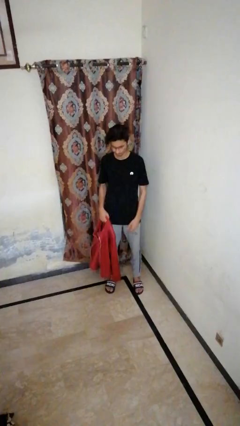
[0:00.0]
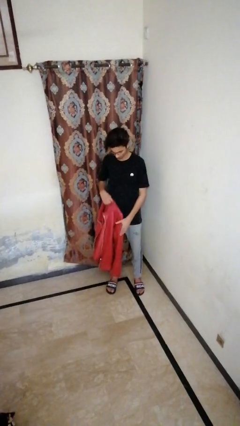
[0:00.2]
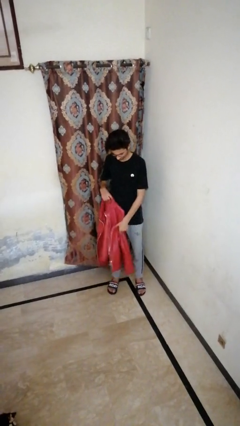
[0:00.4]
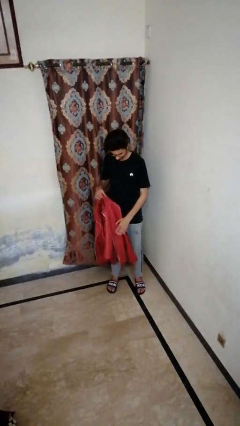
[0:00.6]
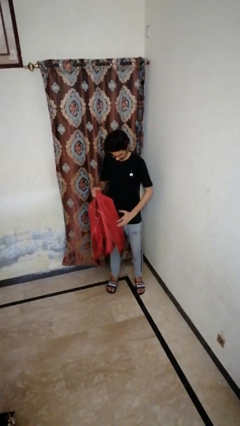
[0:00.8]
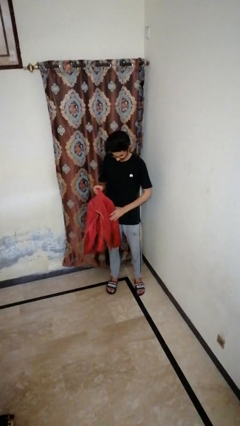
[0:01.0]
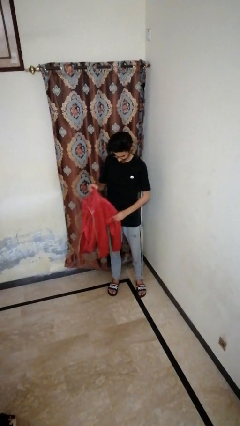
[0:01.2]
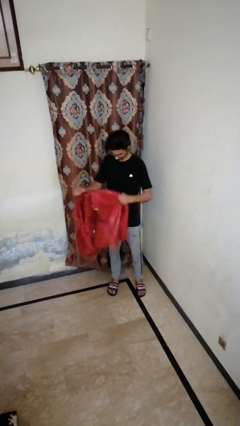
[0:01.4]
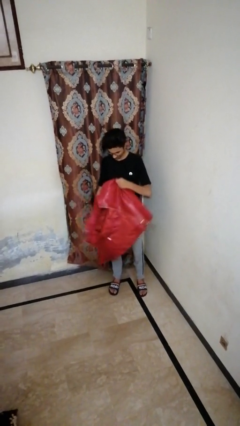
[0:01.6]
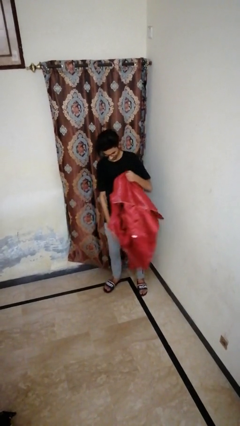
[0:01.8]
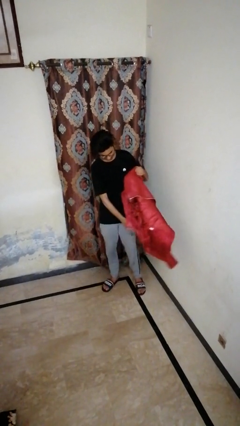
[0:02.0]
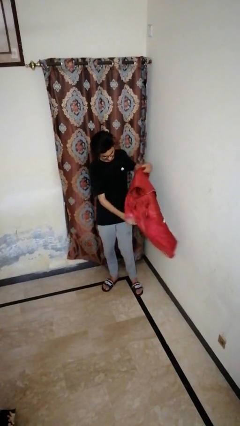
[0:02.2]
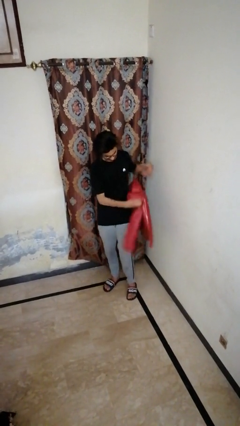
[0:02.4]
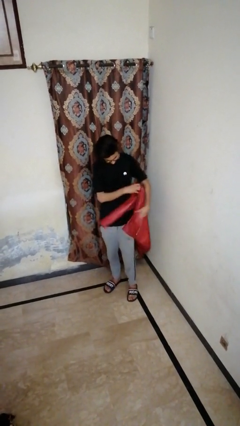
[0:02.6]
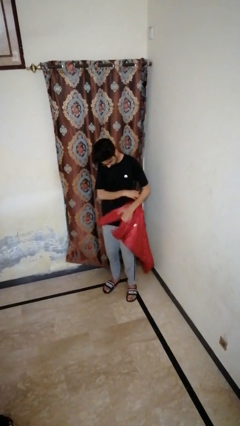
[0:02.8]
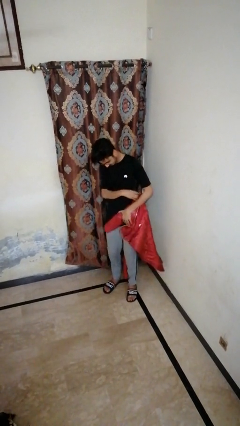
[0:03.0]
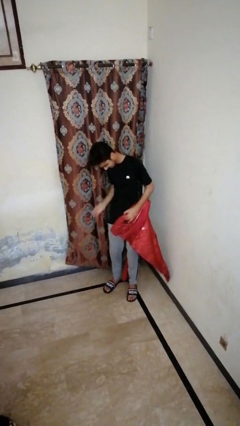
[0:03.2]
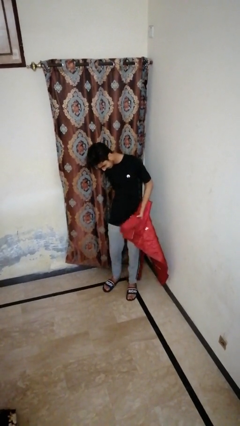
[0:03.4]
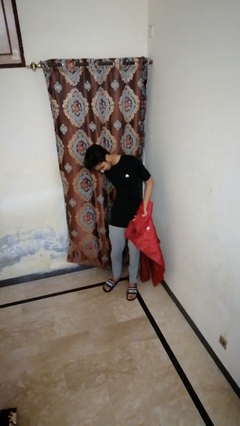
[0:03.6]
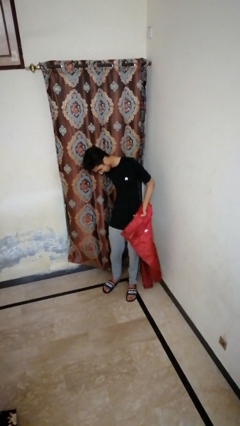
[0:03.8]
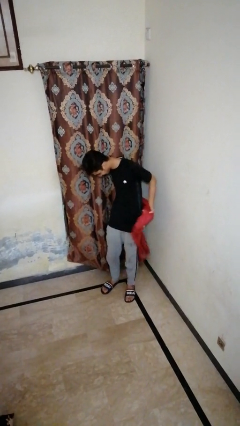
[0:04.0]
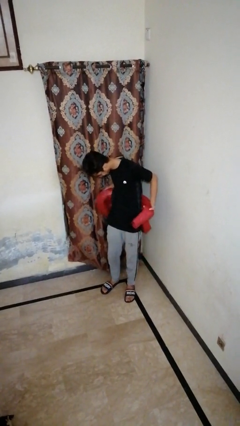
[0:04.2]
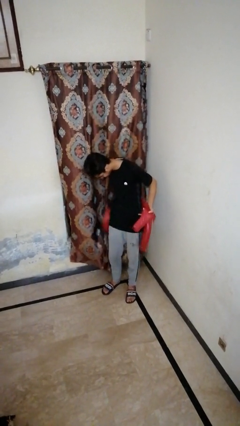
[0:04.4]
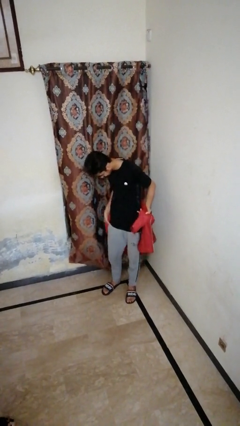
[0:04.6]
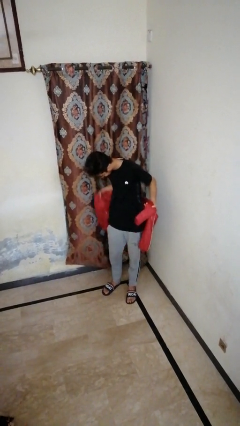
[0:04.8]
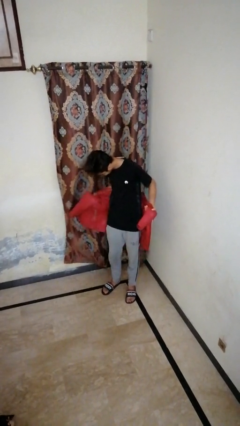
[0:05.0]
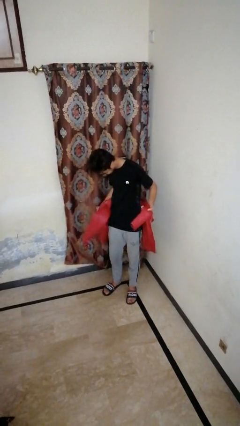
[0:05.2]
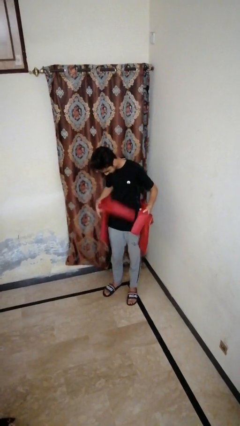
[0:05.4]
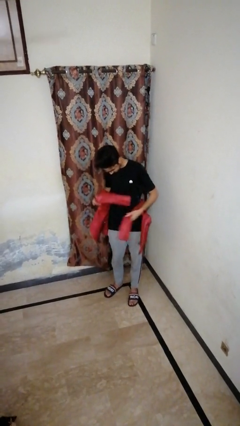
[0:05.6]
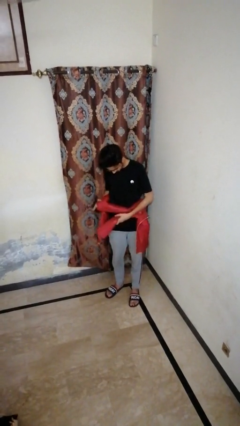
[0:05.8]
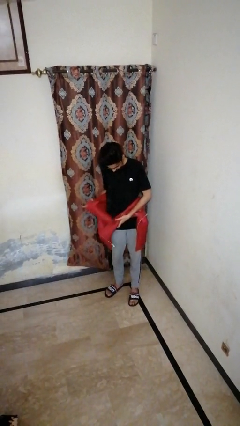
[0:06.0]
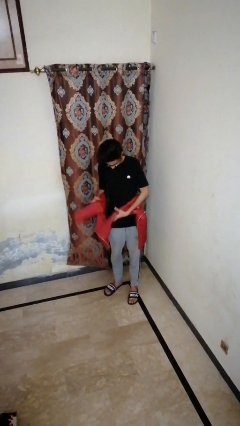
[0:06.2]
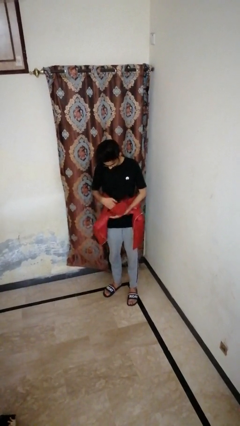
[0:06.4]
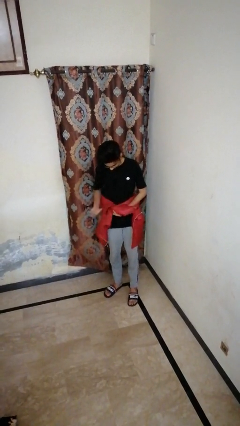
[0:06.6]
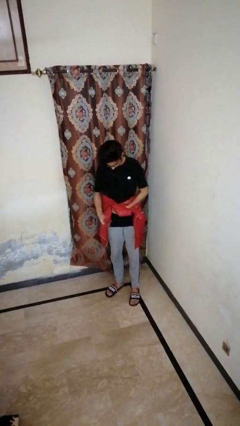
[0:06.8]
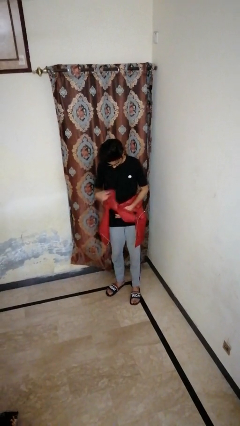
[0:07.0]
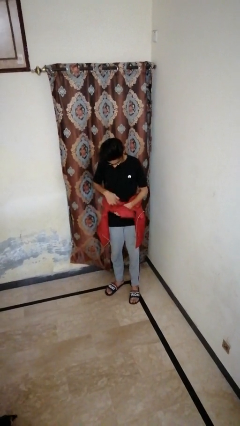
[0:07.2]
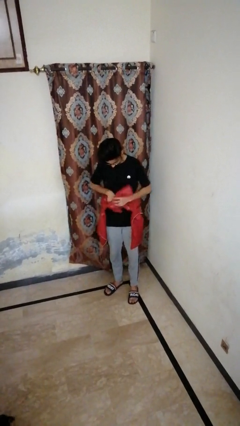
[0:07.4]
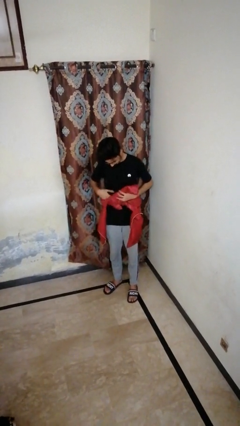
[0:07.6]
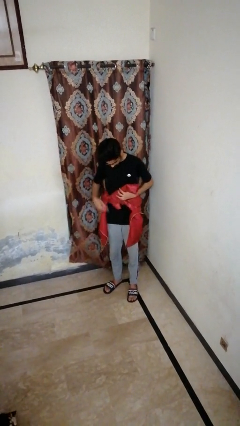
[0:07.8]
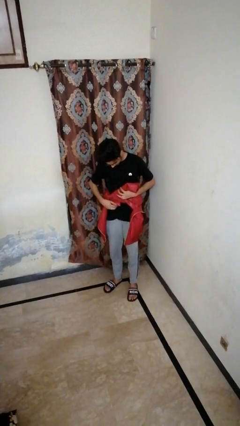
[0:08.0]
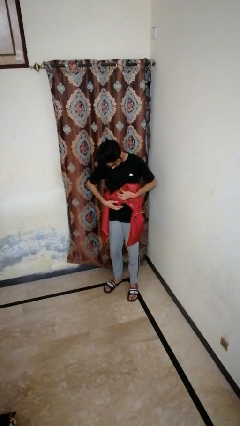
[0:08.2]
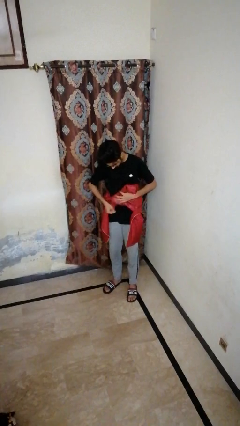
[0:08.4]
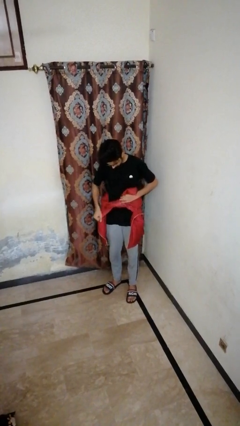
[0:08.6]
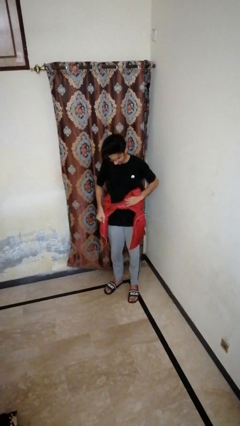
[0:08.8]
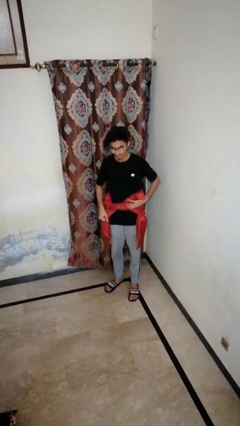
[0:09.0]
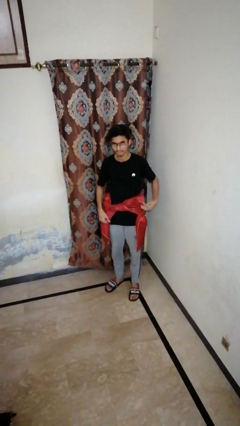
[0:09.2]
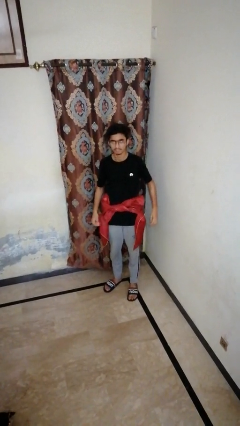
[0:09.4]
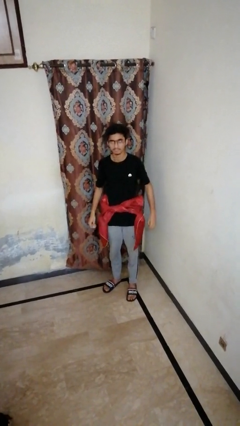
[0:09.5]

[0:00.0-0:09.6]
person ties jacket around waist

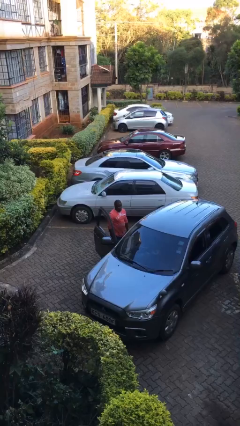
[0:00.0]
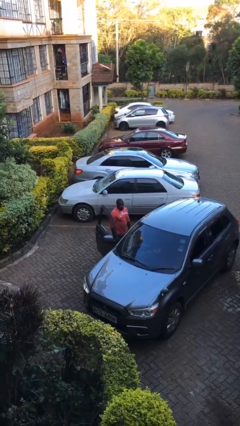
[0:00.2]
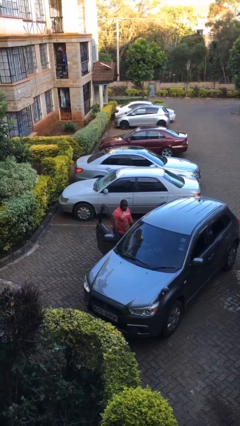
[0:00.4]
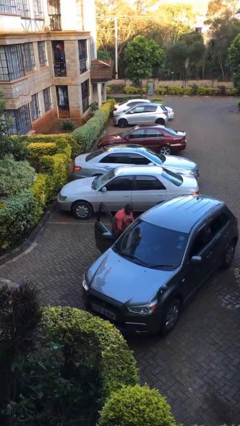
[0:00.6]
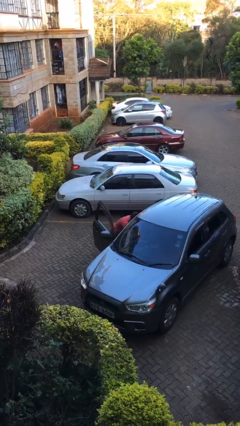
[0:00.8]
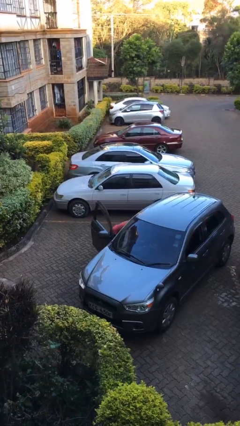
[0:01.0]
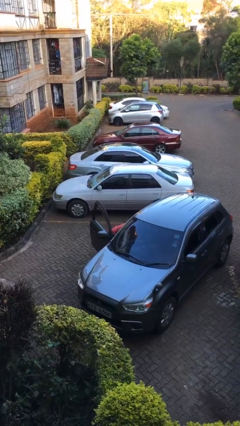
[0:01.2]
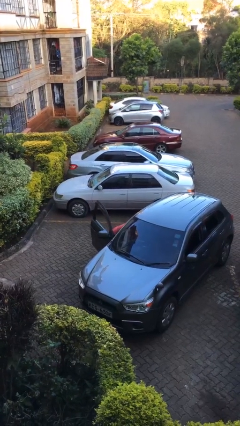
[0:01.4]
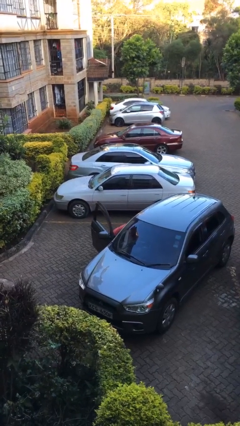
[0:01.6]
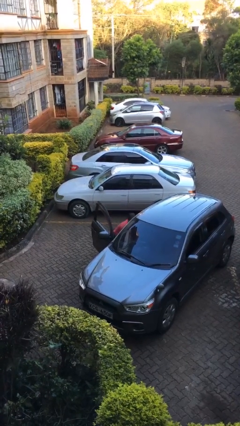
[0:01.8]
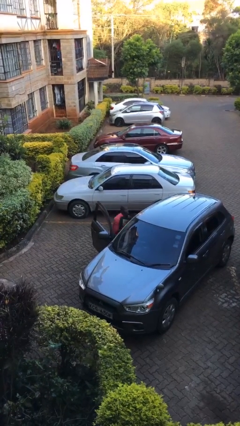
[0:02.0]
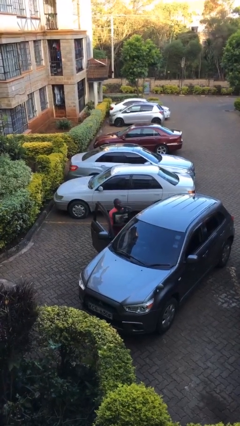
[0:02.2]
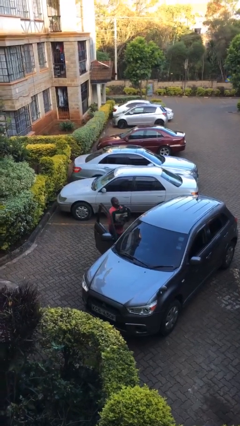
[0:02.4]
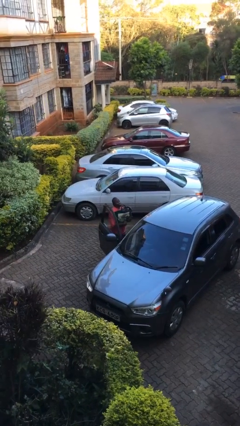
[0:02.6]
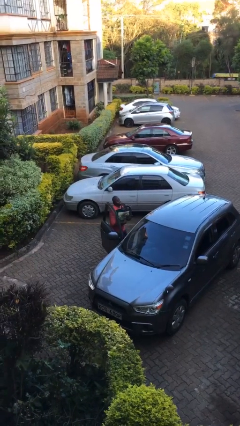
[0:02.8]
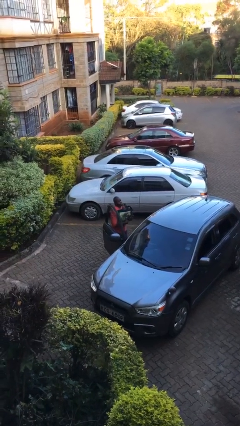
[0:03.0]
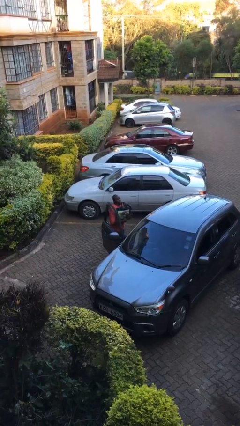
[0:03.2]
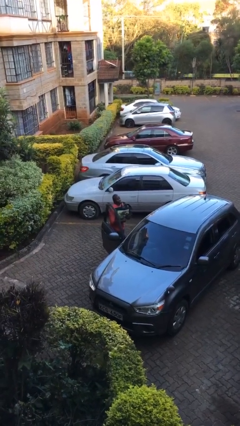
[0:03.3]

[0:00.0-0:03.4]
person unloads car

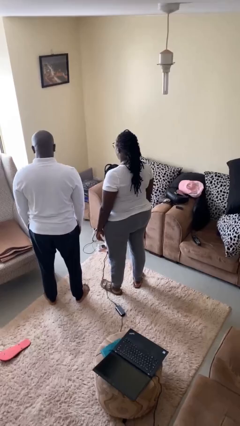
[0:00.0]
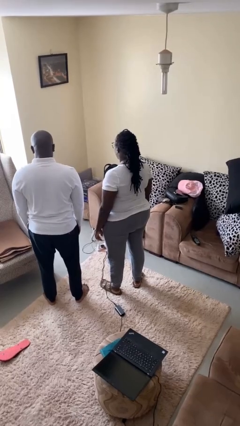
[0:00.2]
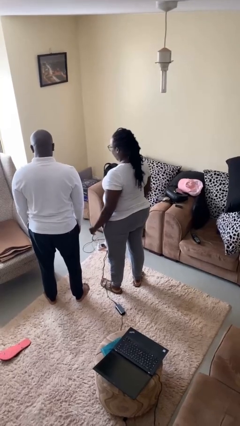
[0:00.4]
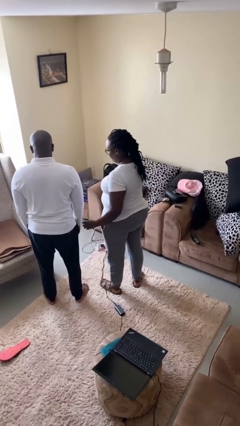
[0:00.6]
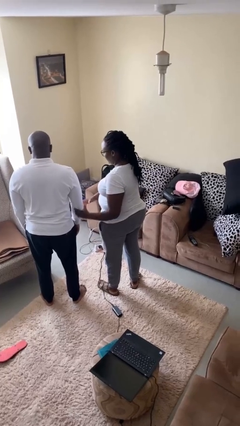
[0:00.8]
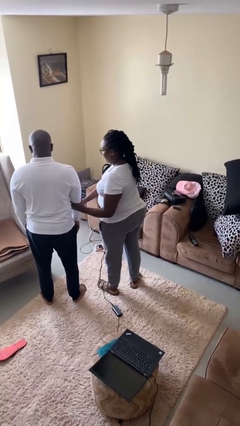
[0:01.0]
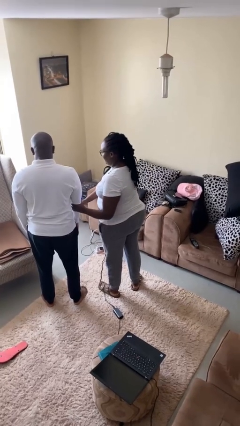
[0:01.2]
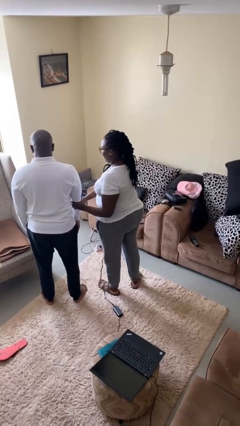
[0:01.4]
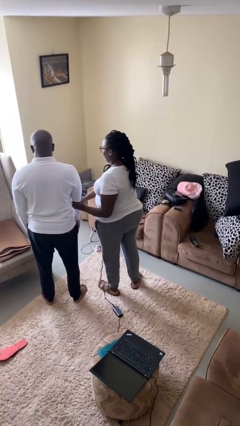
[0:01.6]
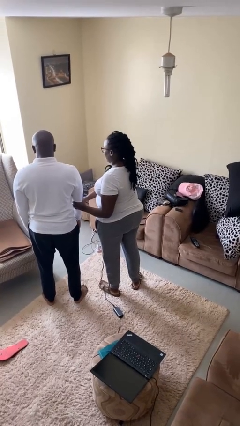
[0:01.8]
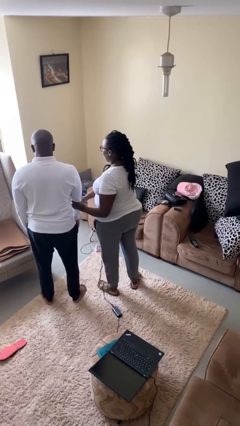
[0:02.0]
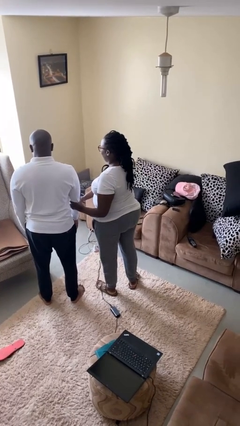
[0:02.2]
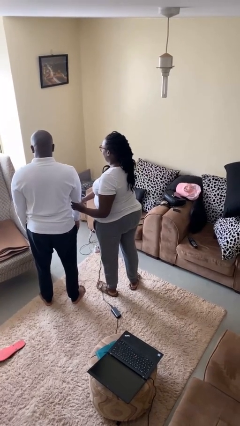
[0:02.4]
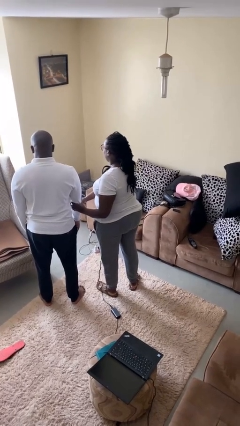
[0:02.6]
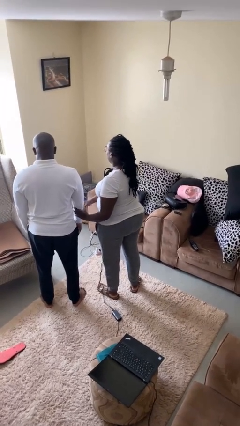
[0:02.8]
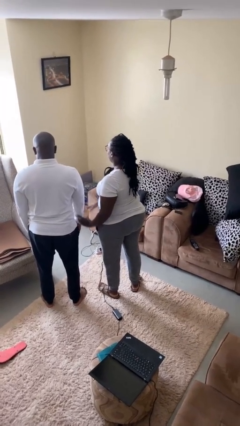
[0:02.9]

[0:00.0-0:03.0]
person grabs person by forearm

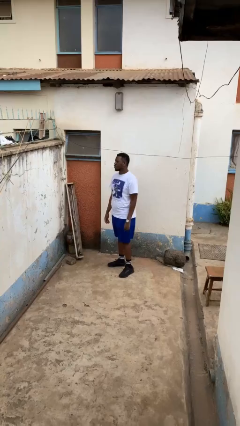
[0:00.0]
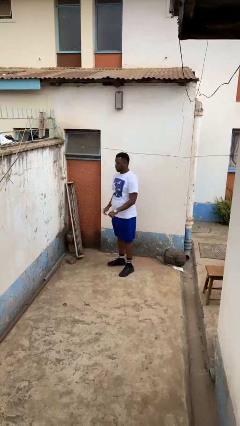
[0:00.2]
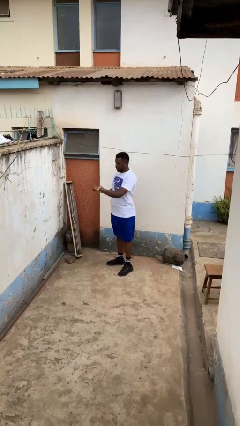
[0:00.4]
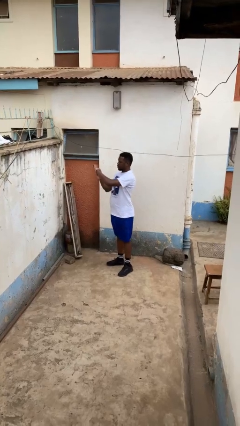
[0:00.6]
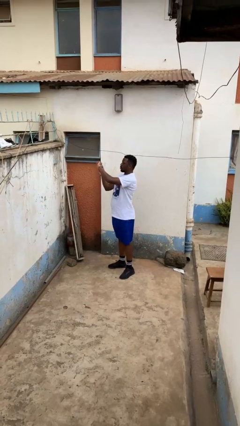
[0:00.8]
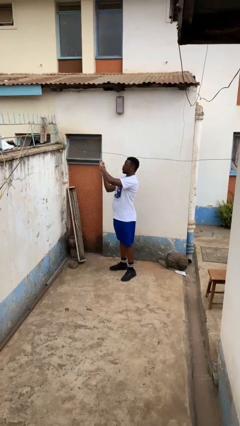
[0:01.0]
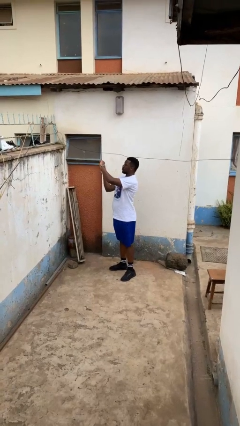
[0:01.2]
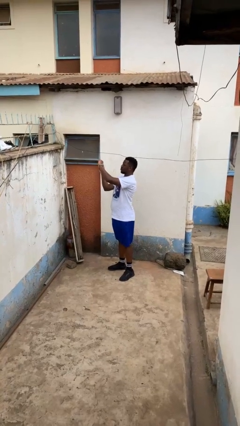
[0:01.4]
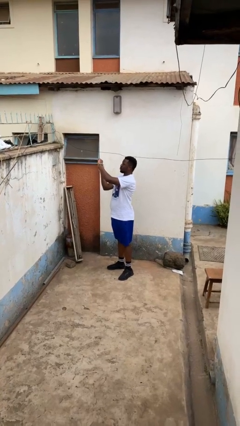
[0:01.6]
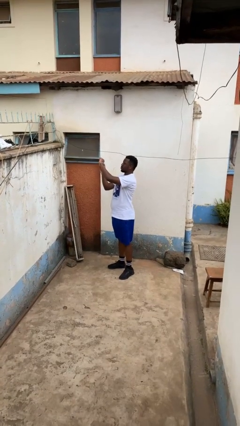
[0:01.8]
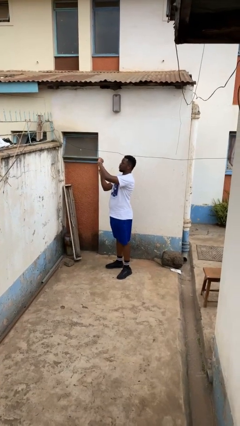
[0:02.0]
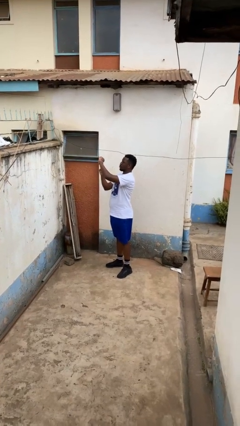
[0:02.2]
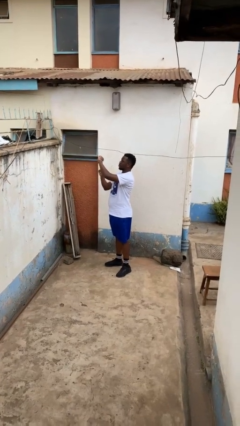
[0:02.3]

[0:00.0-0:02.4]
person looks at wristwatch
